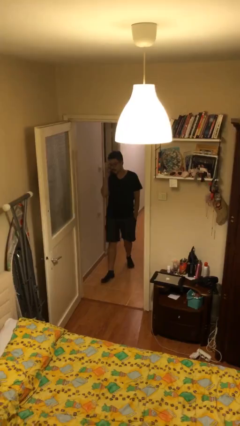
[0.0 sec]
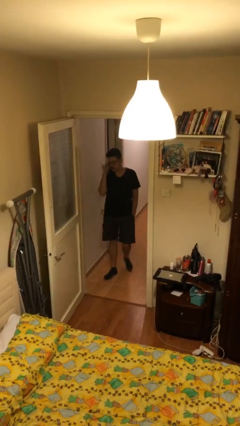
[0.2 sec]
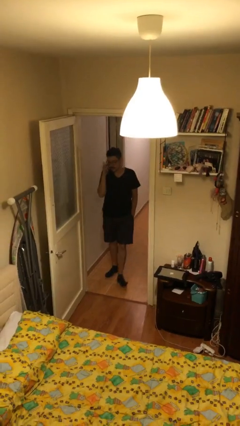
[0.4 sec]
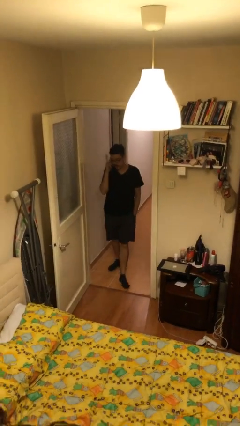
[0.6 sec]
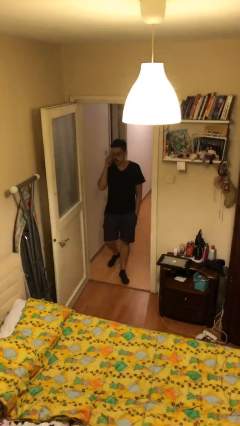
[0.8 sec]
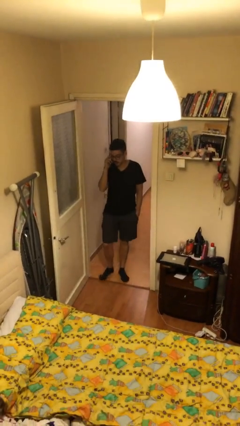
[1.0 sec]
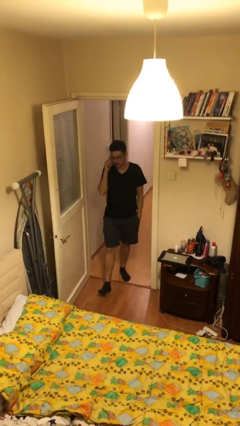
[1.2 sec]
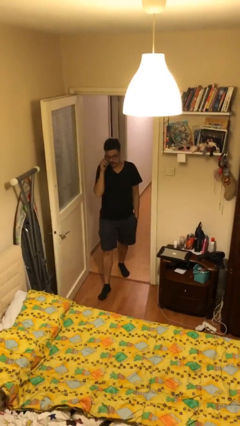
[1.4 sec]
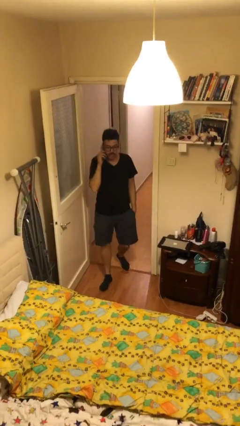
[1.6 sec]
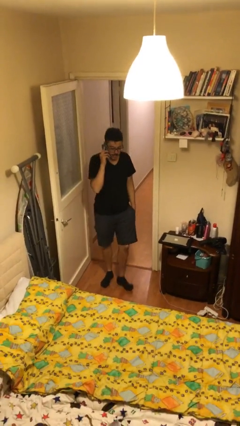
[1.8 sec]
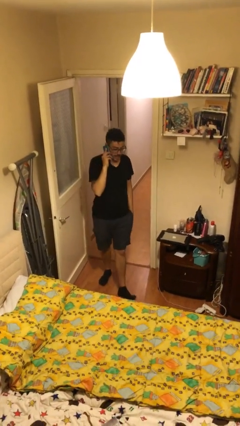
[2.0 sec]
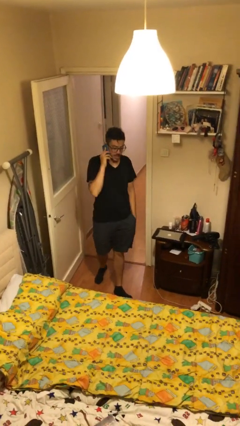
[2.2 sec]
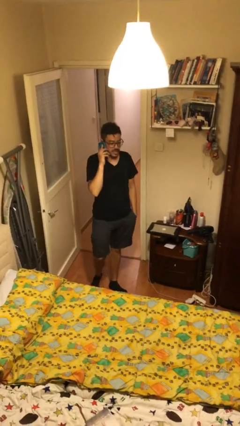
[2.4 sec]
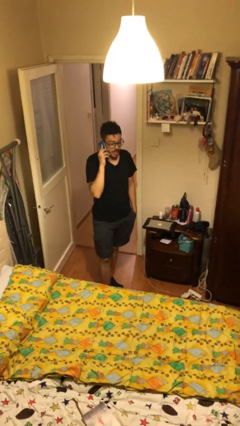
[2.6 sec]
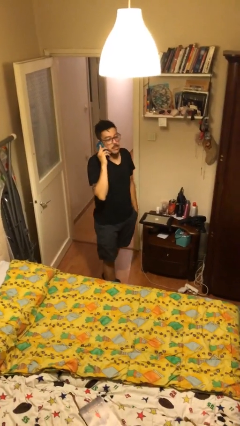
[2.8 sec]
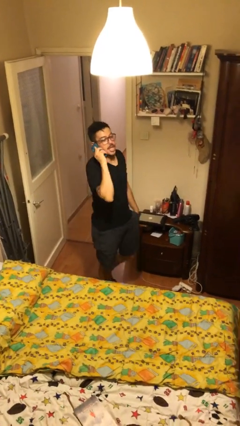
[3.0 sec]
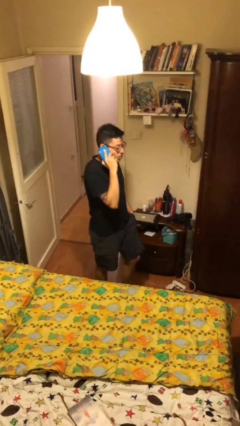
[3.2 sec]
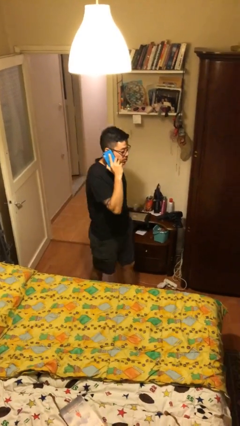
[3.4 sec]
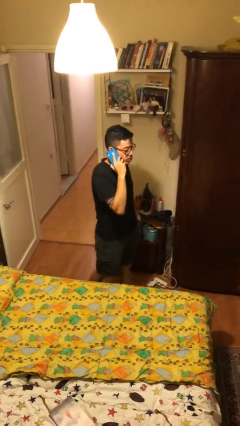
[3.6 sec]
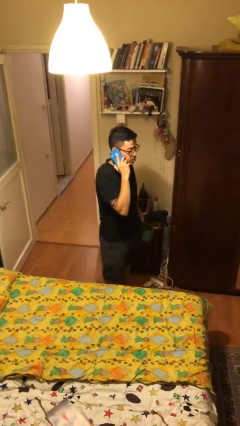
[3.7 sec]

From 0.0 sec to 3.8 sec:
person enters scene through structure

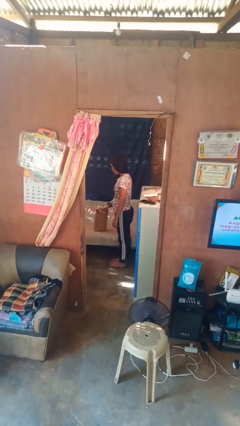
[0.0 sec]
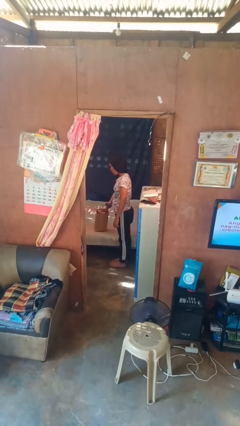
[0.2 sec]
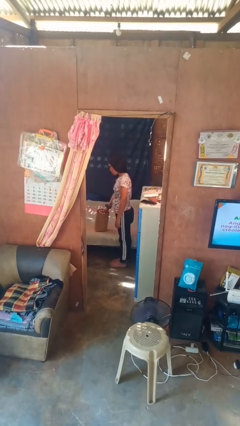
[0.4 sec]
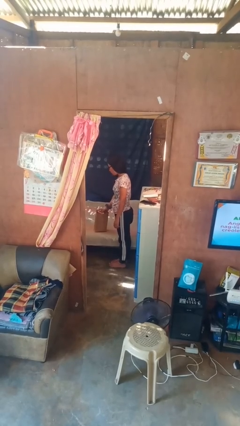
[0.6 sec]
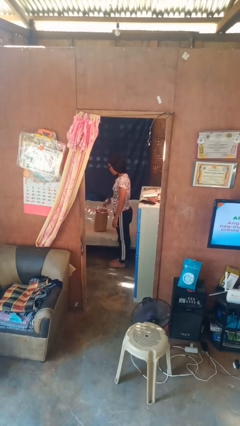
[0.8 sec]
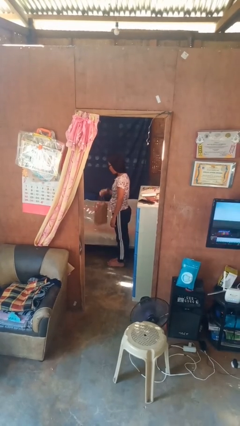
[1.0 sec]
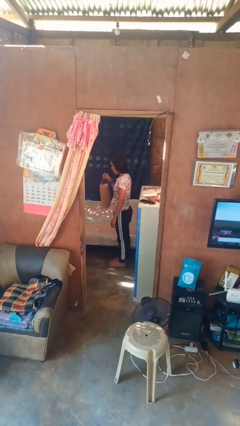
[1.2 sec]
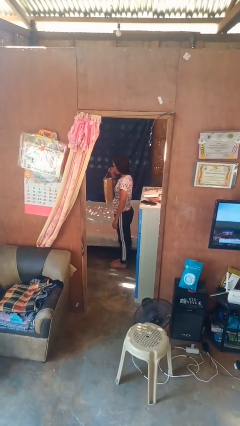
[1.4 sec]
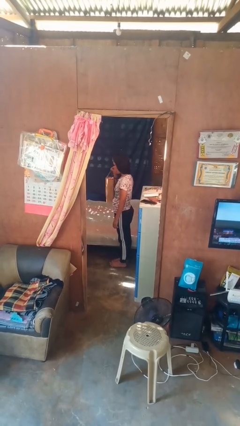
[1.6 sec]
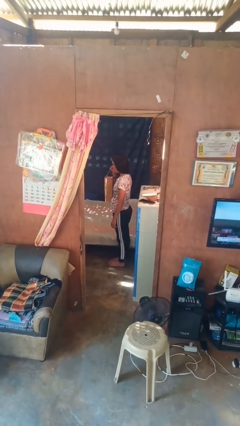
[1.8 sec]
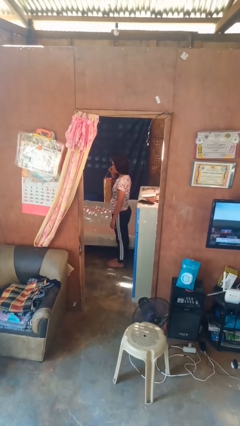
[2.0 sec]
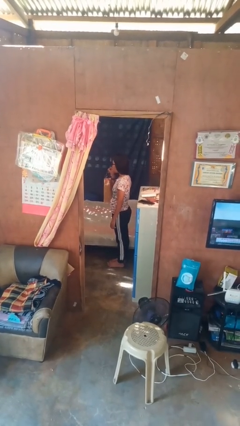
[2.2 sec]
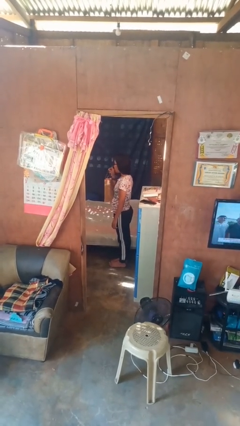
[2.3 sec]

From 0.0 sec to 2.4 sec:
person picks up object from bed

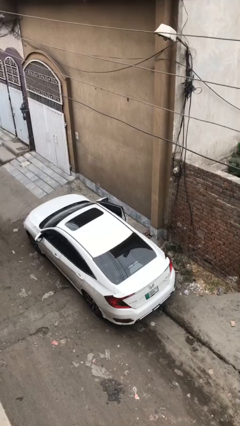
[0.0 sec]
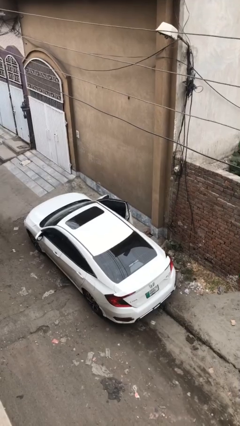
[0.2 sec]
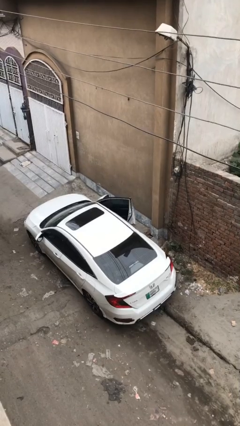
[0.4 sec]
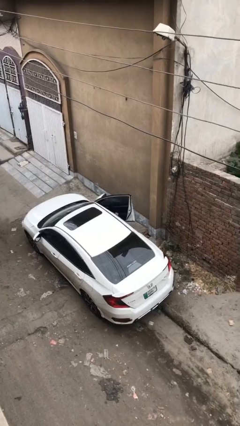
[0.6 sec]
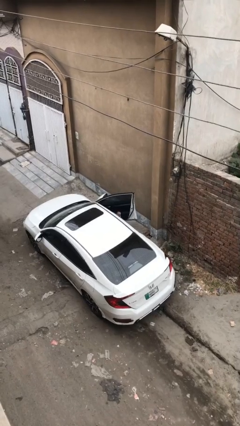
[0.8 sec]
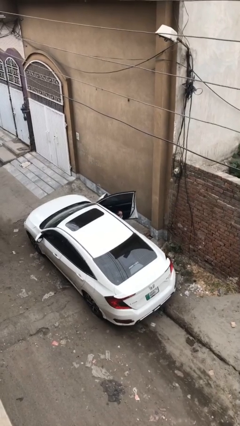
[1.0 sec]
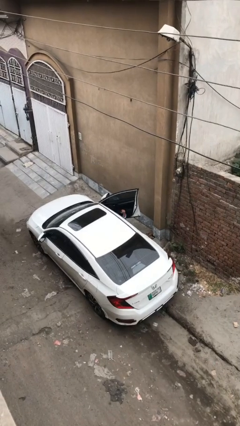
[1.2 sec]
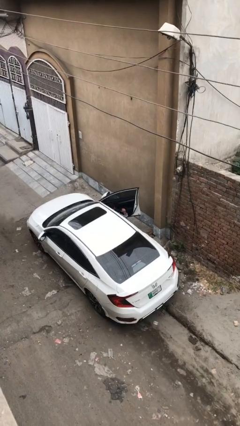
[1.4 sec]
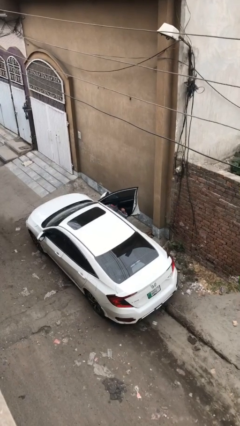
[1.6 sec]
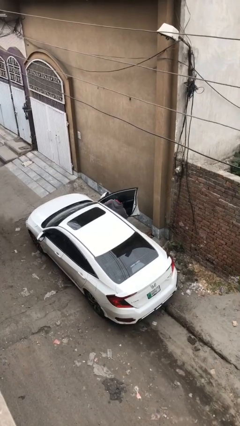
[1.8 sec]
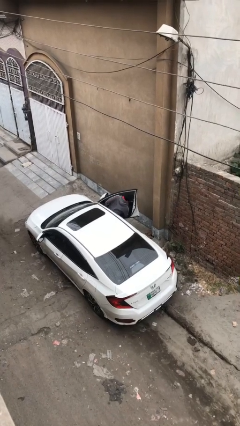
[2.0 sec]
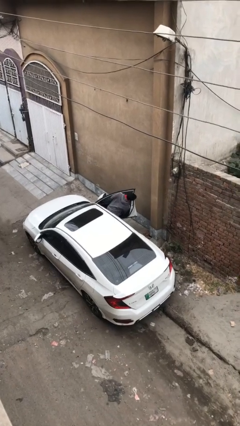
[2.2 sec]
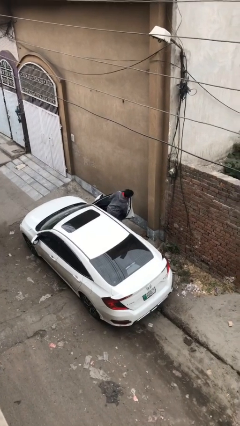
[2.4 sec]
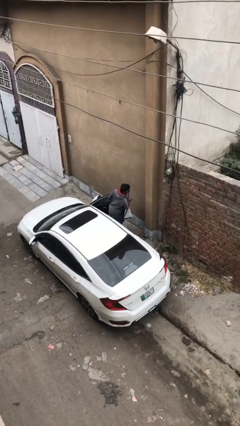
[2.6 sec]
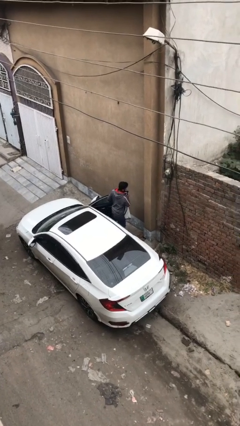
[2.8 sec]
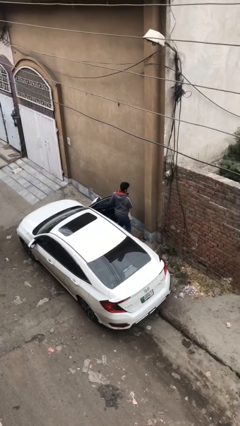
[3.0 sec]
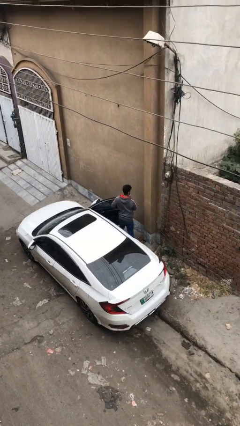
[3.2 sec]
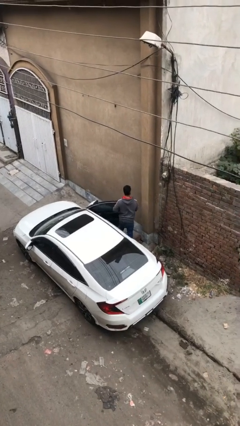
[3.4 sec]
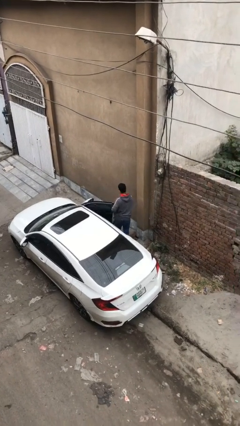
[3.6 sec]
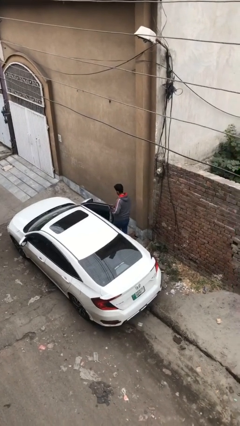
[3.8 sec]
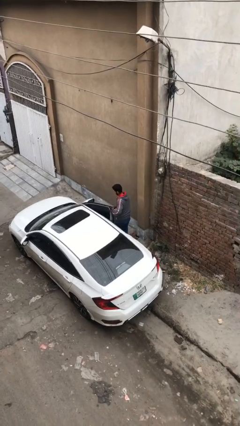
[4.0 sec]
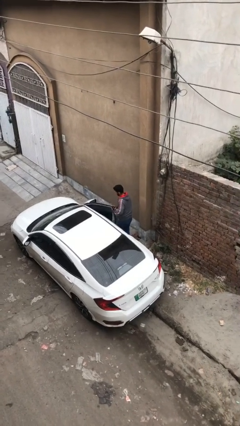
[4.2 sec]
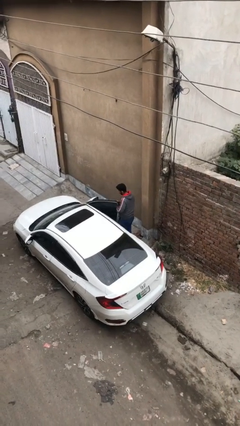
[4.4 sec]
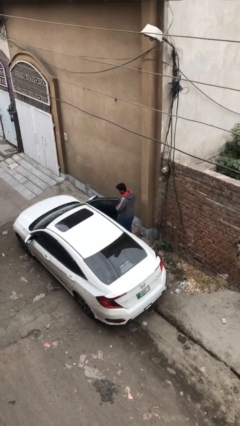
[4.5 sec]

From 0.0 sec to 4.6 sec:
car drops off person

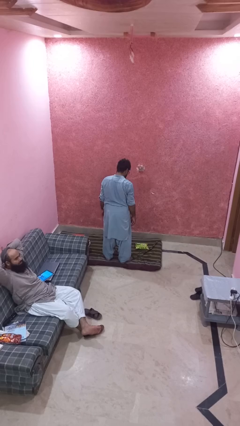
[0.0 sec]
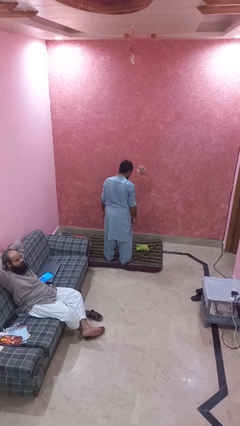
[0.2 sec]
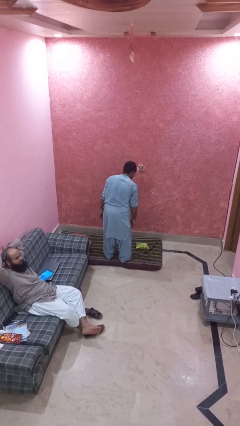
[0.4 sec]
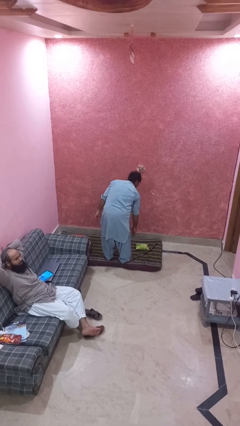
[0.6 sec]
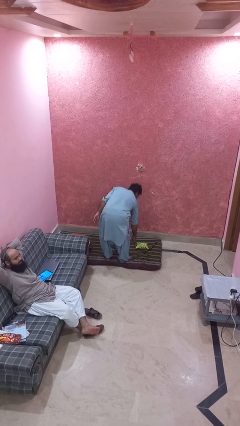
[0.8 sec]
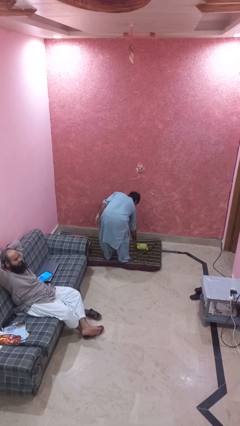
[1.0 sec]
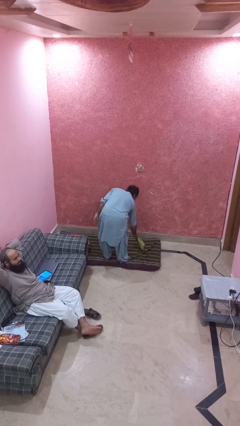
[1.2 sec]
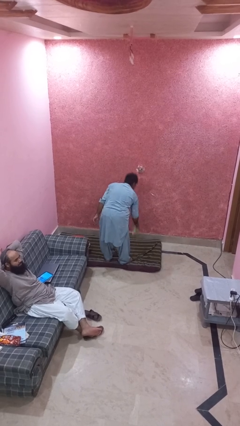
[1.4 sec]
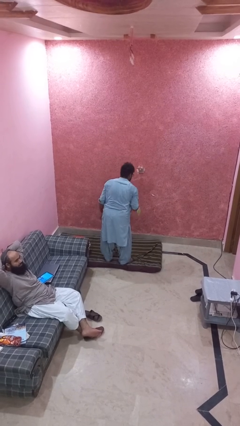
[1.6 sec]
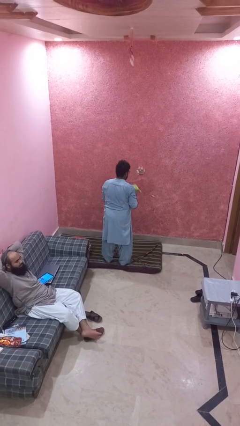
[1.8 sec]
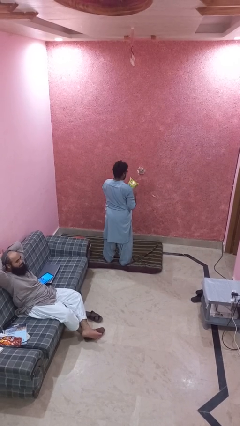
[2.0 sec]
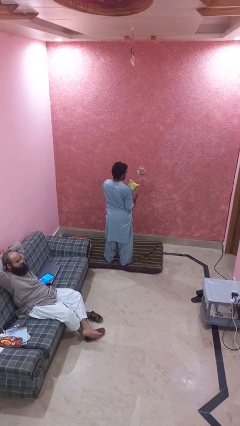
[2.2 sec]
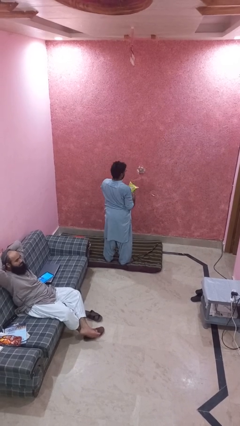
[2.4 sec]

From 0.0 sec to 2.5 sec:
person picks up object from floor

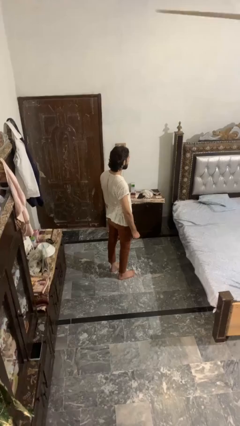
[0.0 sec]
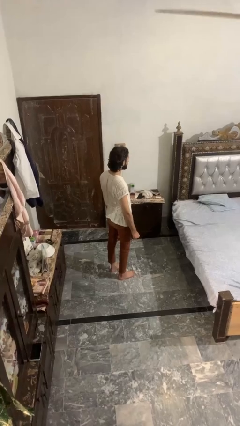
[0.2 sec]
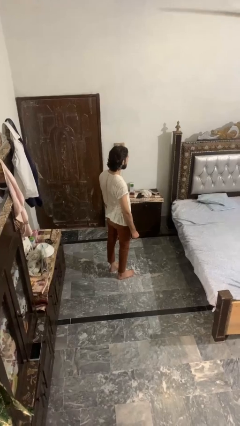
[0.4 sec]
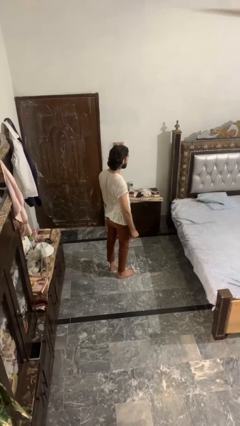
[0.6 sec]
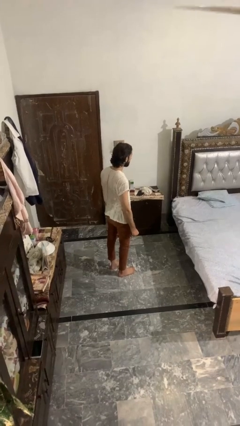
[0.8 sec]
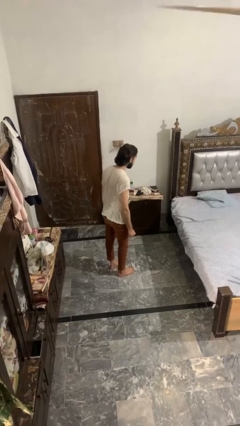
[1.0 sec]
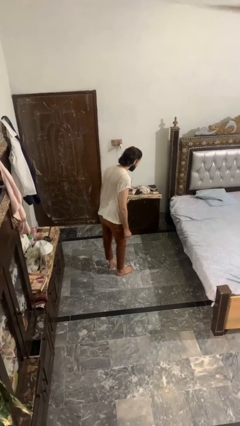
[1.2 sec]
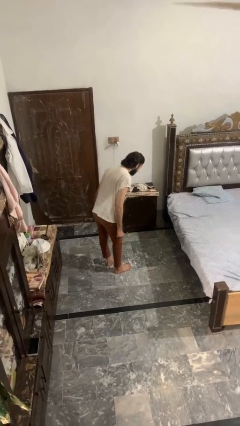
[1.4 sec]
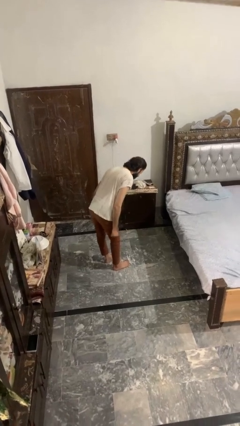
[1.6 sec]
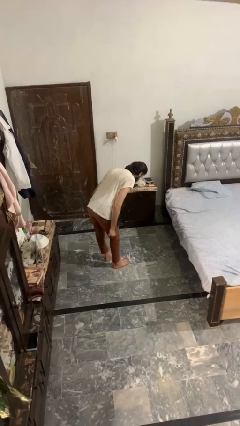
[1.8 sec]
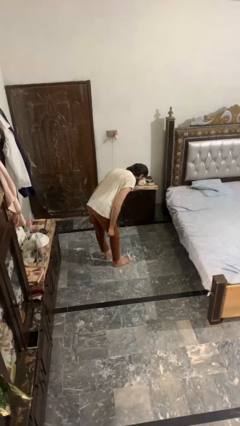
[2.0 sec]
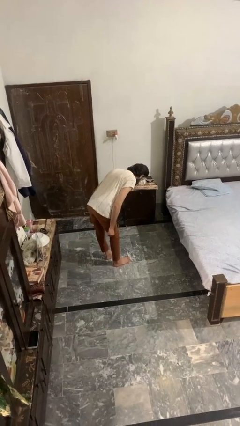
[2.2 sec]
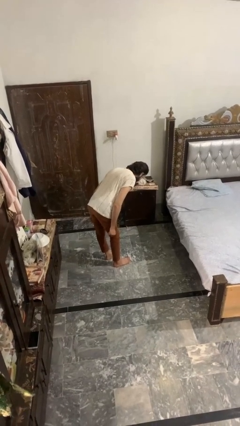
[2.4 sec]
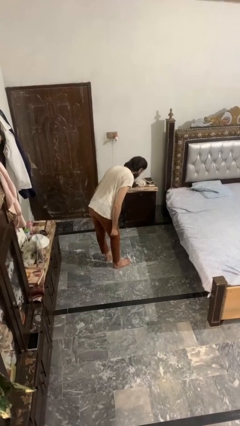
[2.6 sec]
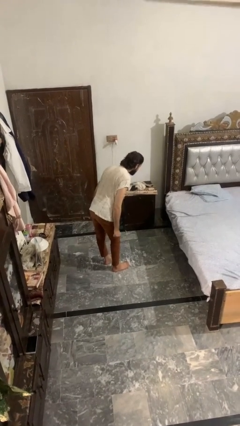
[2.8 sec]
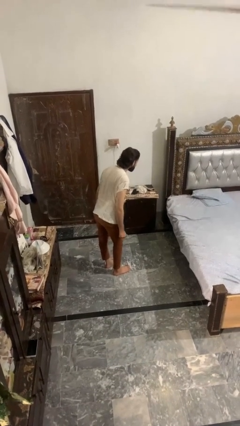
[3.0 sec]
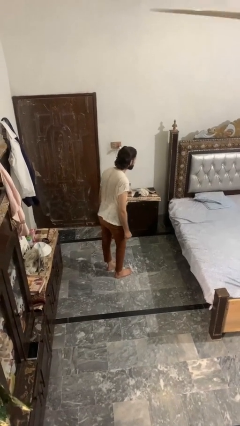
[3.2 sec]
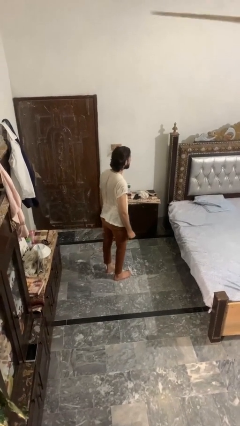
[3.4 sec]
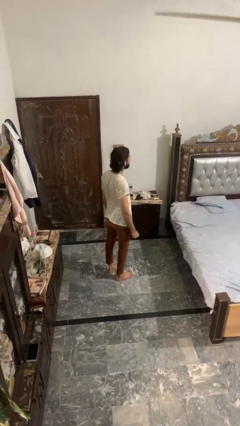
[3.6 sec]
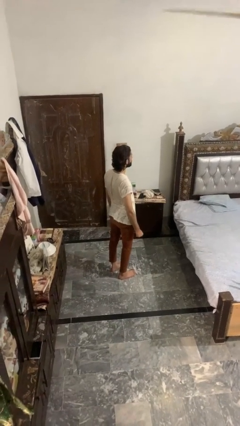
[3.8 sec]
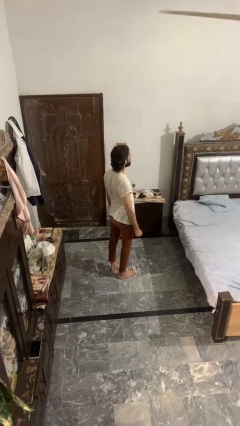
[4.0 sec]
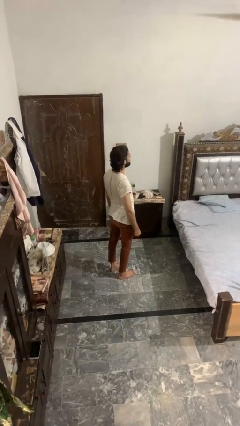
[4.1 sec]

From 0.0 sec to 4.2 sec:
person bows

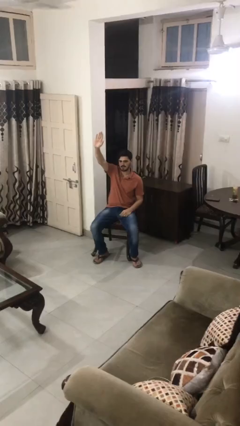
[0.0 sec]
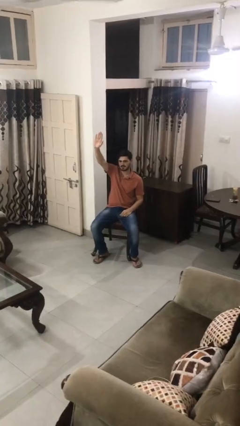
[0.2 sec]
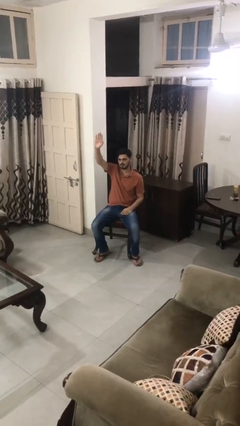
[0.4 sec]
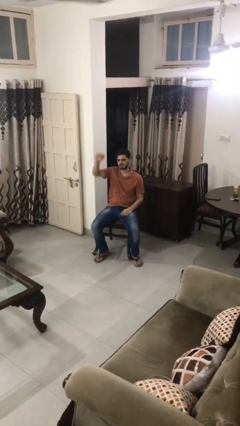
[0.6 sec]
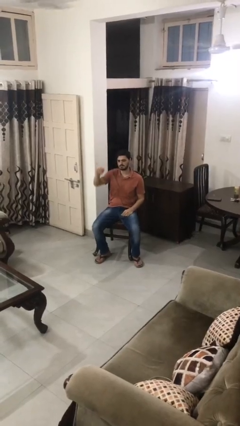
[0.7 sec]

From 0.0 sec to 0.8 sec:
person gestures lower hand
